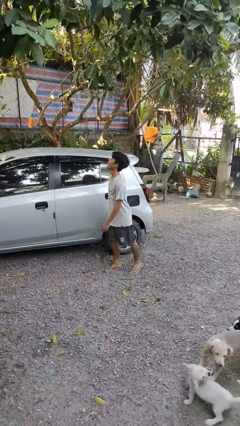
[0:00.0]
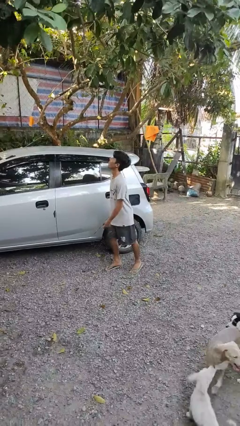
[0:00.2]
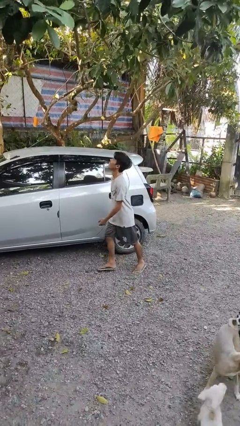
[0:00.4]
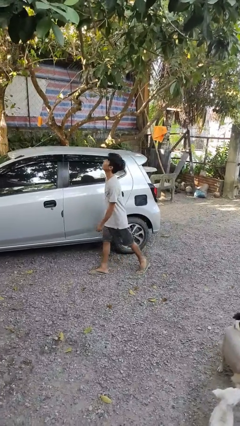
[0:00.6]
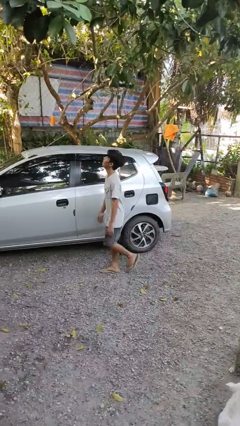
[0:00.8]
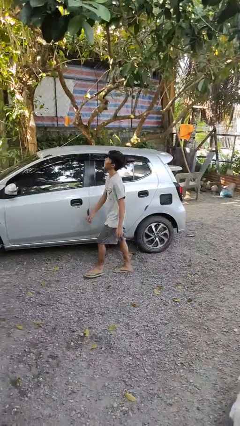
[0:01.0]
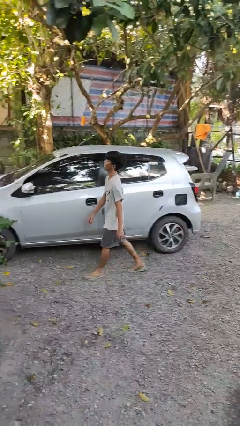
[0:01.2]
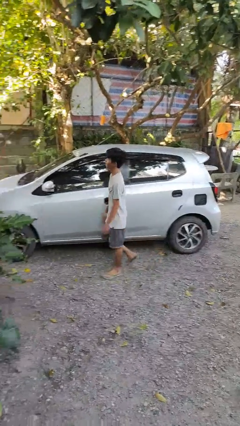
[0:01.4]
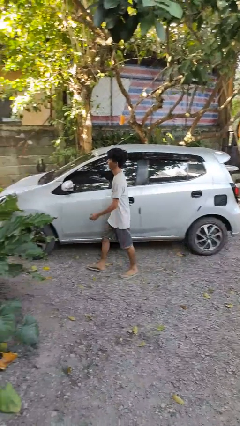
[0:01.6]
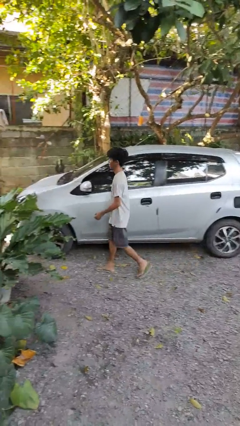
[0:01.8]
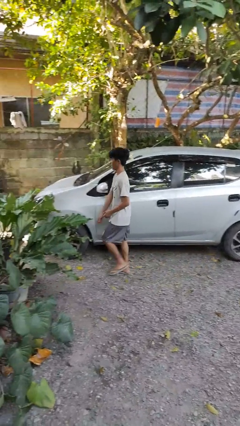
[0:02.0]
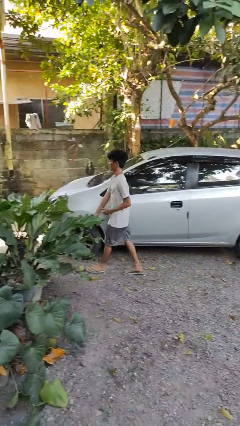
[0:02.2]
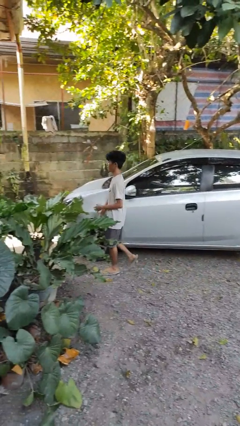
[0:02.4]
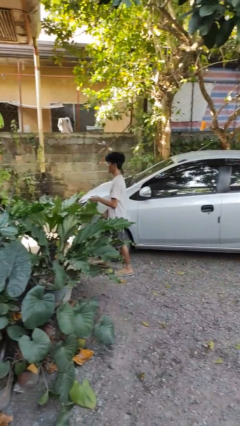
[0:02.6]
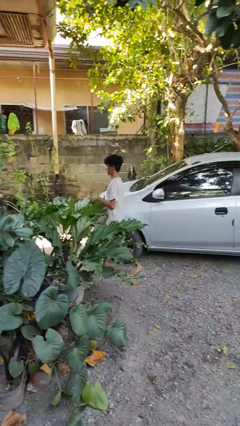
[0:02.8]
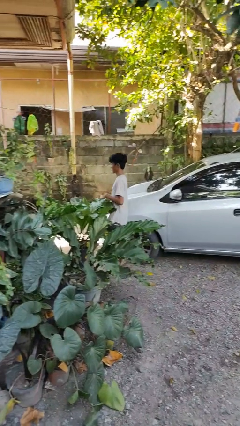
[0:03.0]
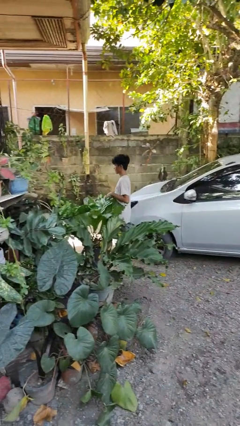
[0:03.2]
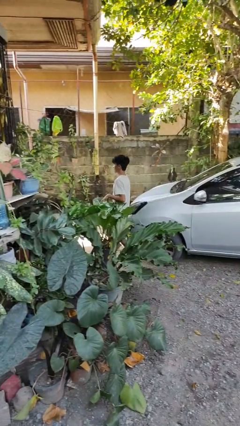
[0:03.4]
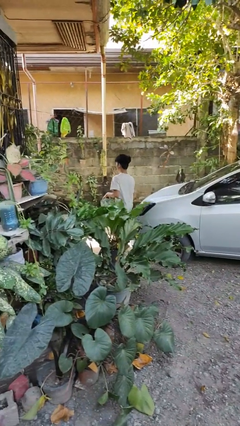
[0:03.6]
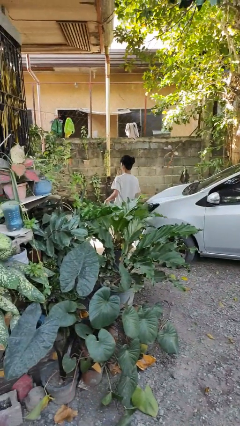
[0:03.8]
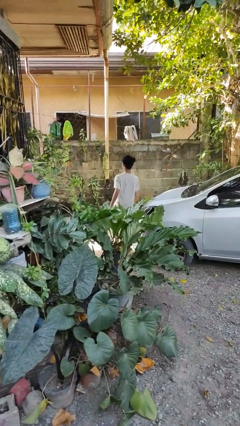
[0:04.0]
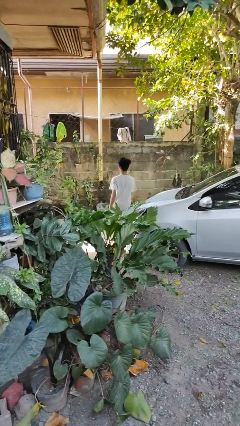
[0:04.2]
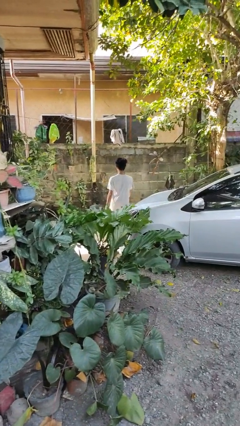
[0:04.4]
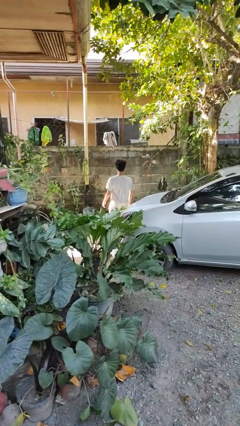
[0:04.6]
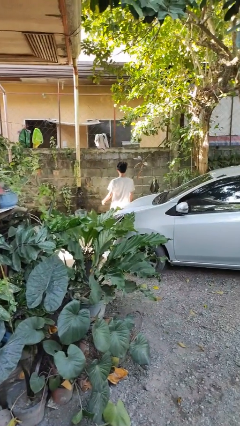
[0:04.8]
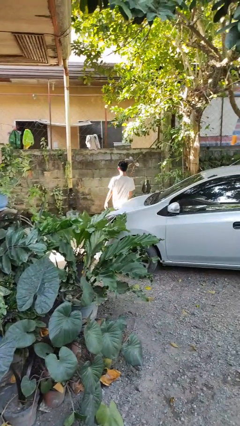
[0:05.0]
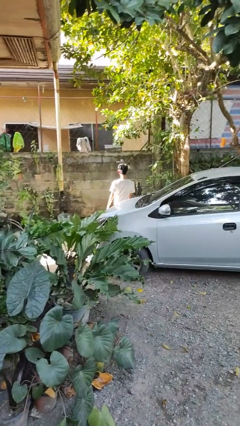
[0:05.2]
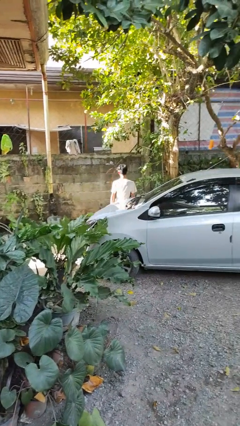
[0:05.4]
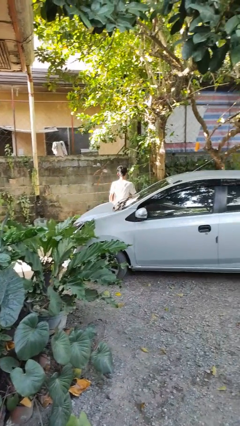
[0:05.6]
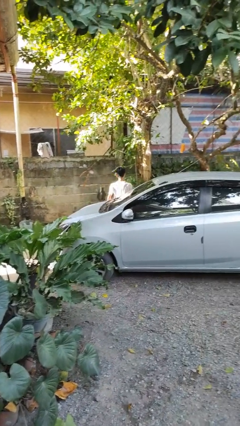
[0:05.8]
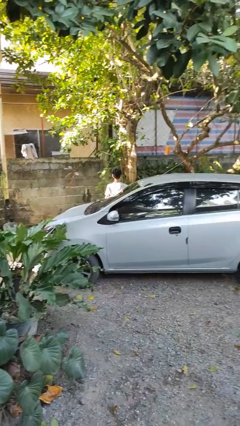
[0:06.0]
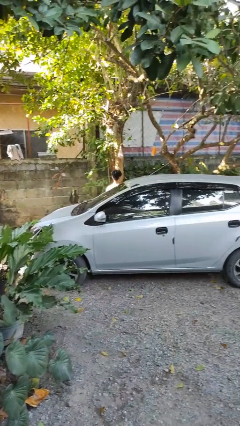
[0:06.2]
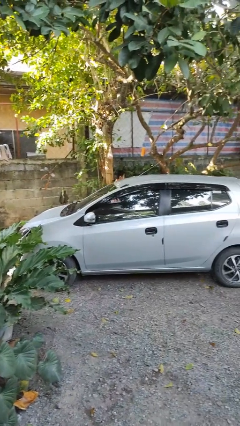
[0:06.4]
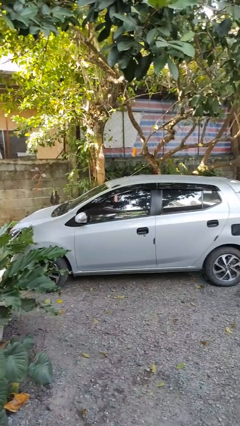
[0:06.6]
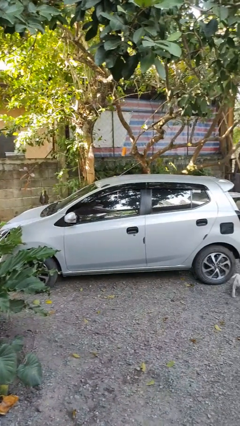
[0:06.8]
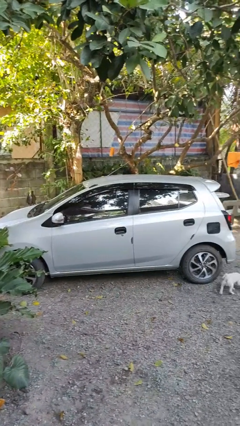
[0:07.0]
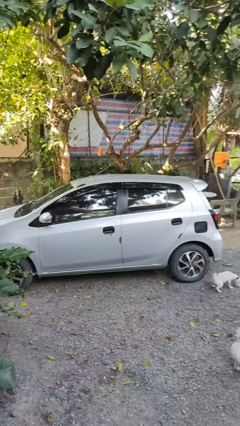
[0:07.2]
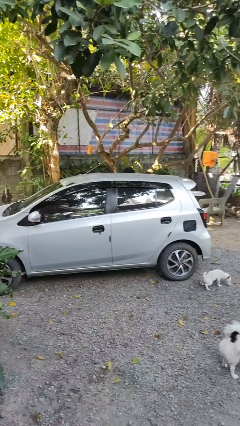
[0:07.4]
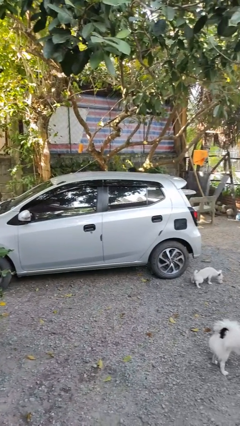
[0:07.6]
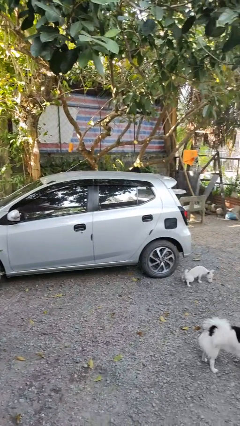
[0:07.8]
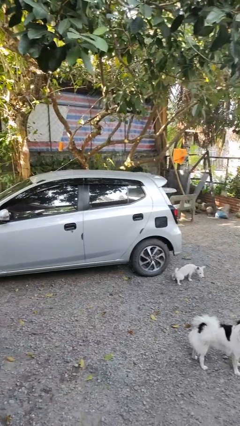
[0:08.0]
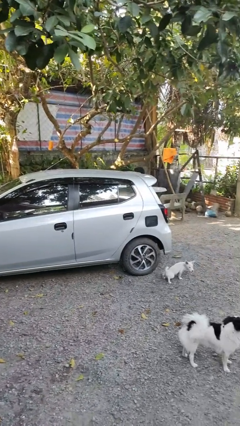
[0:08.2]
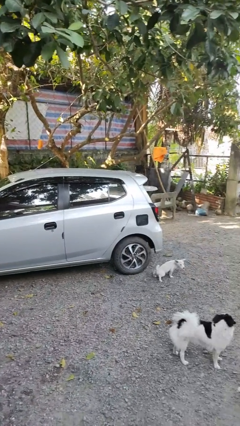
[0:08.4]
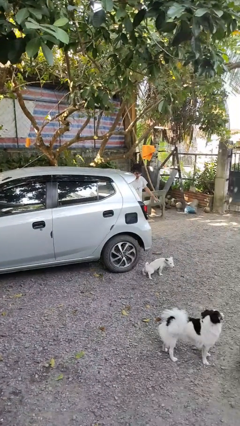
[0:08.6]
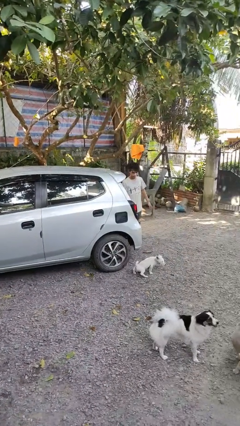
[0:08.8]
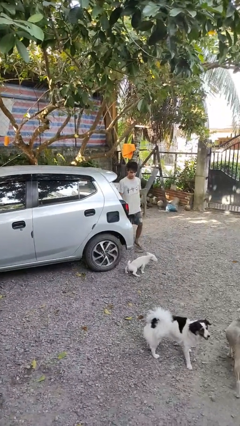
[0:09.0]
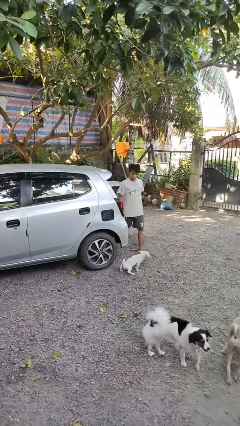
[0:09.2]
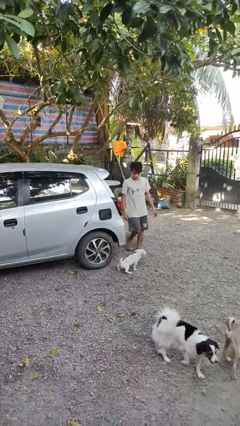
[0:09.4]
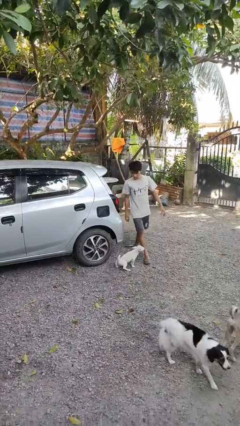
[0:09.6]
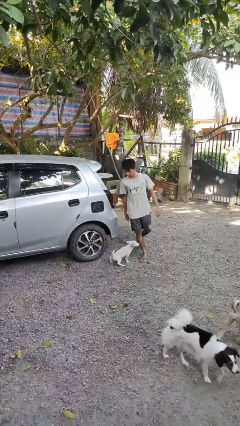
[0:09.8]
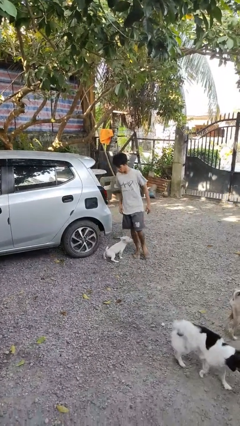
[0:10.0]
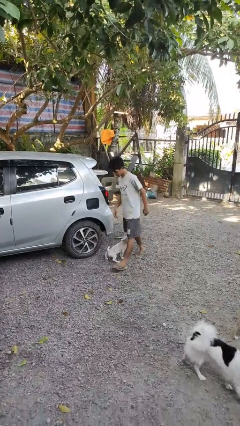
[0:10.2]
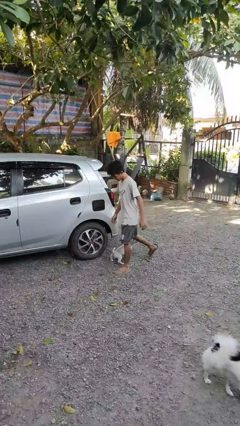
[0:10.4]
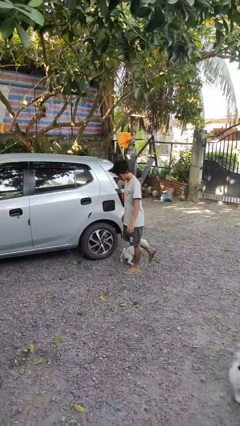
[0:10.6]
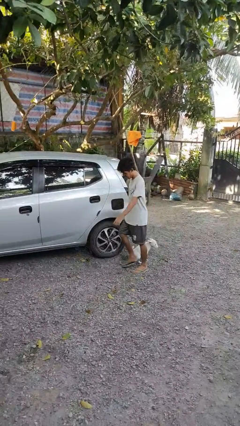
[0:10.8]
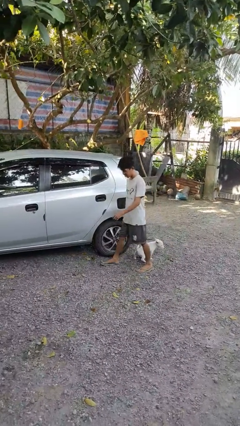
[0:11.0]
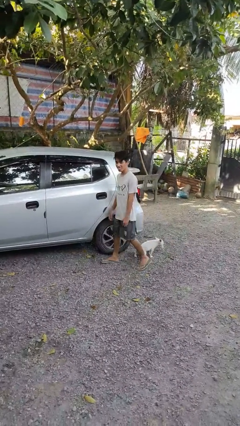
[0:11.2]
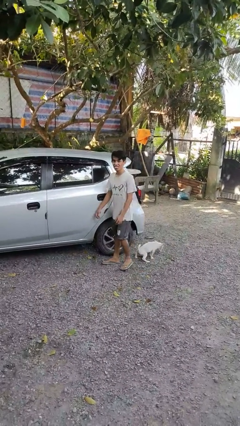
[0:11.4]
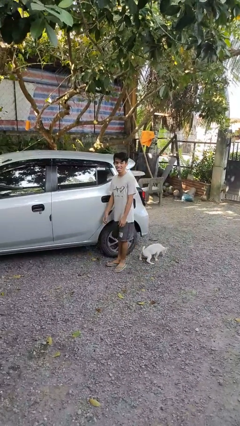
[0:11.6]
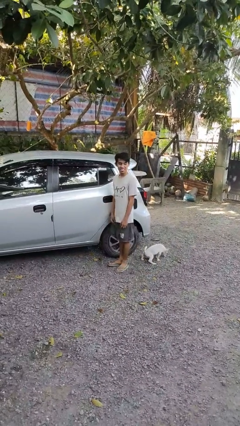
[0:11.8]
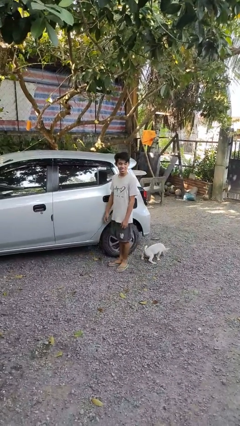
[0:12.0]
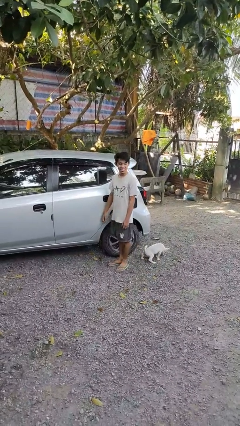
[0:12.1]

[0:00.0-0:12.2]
person walks around car

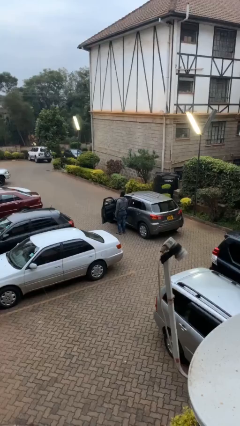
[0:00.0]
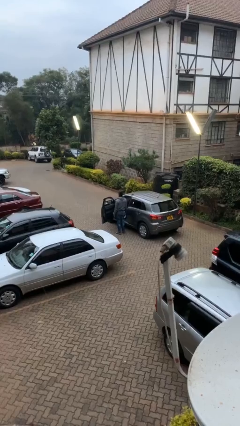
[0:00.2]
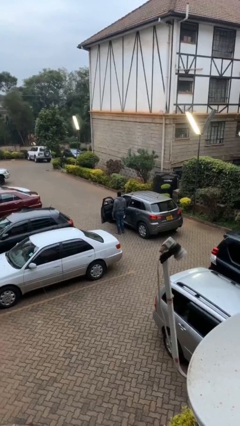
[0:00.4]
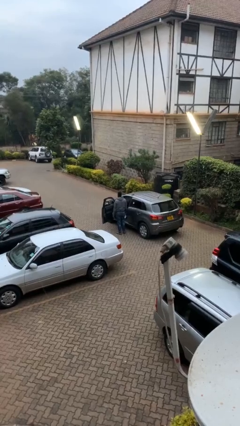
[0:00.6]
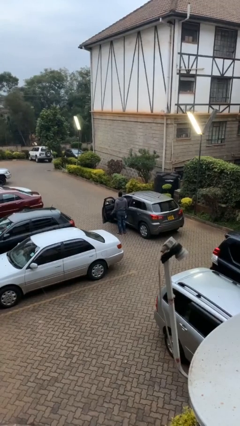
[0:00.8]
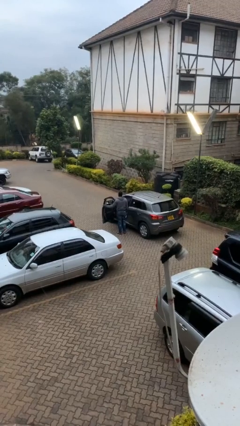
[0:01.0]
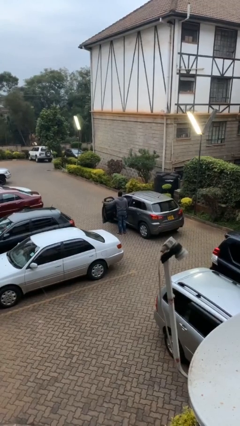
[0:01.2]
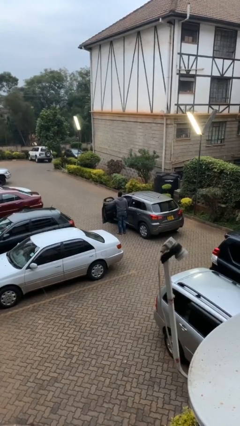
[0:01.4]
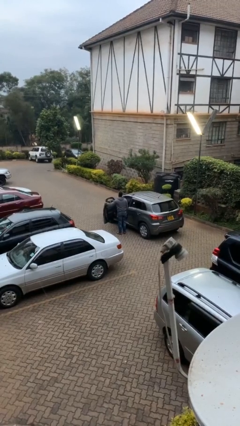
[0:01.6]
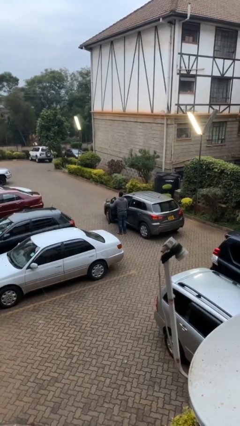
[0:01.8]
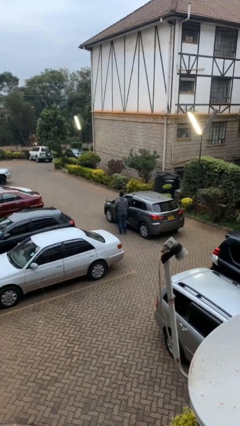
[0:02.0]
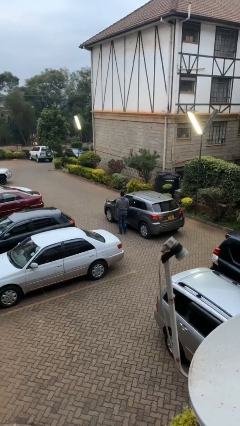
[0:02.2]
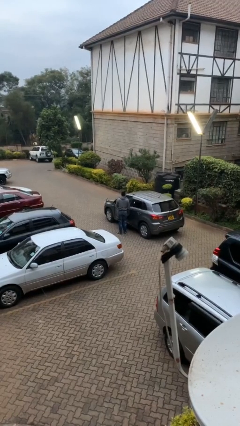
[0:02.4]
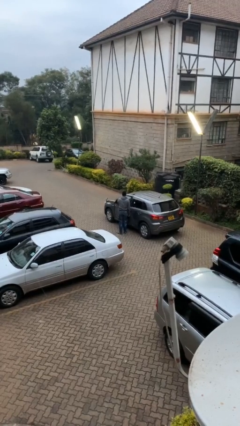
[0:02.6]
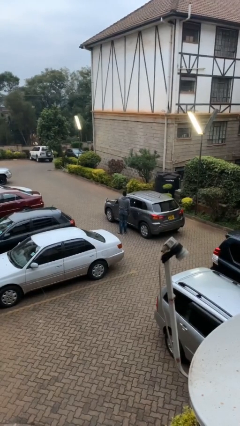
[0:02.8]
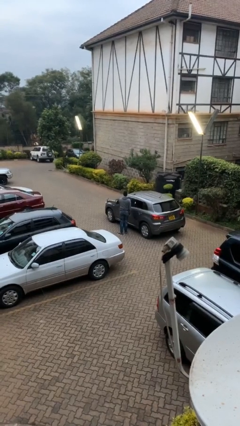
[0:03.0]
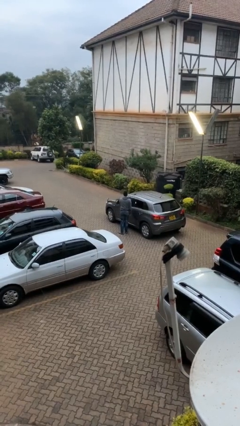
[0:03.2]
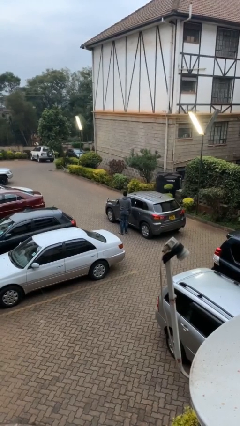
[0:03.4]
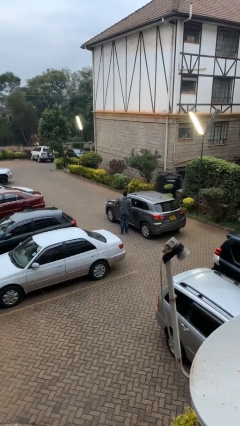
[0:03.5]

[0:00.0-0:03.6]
person closes car door

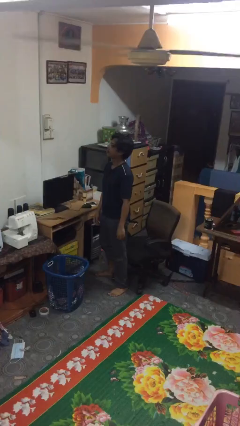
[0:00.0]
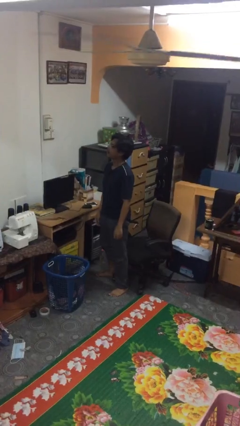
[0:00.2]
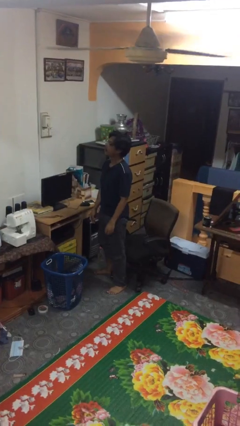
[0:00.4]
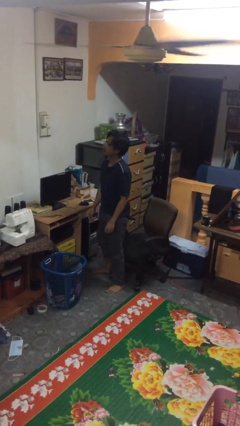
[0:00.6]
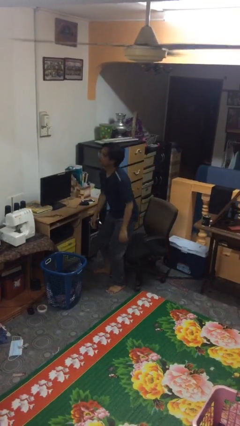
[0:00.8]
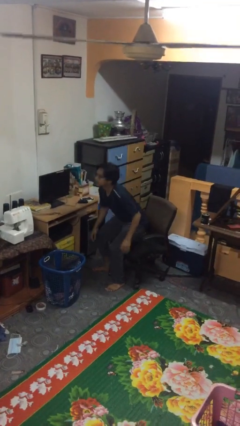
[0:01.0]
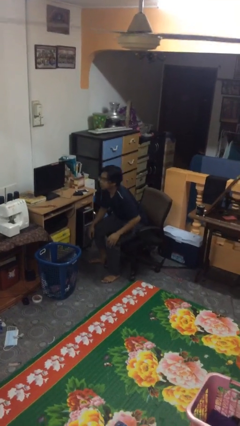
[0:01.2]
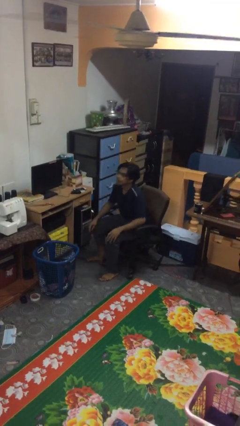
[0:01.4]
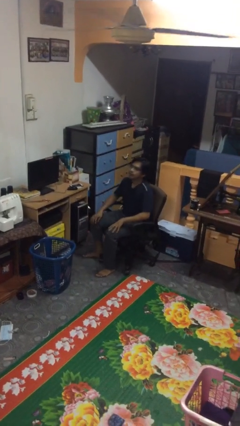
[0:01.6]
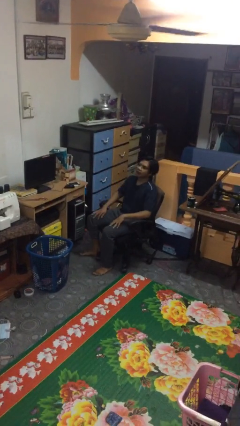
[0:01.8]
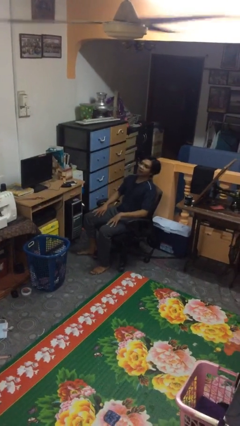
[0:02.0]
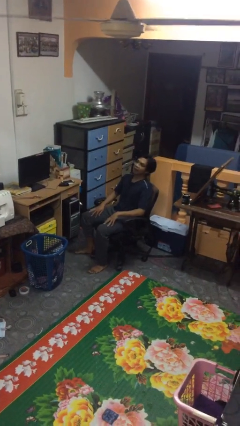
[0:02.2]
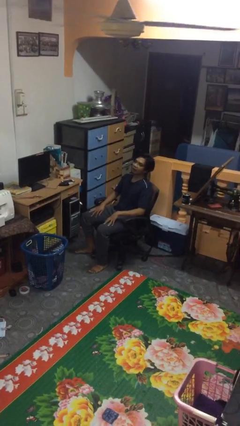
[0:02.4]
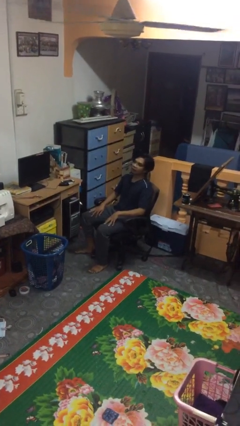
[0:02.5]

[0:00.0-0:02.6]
person sits down
